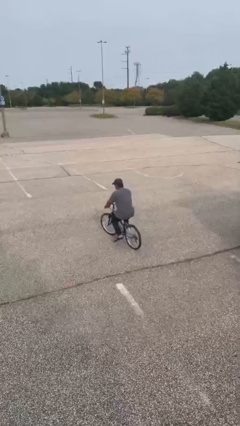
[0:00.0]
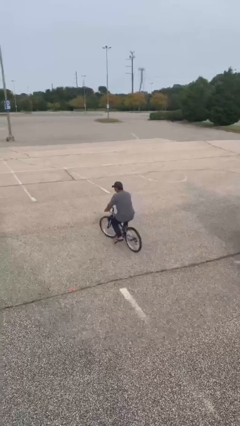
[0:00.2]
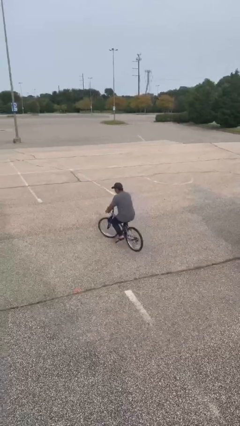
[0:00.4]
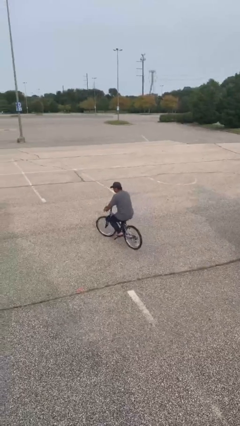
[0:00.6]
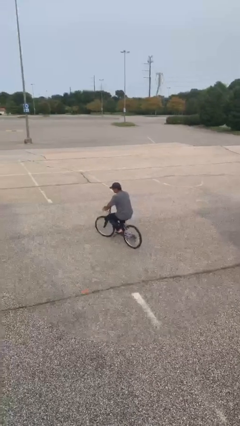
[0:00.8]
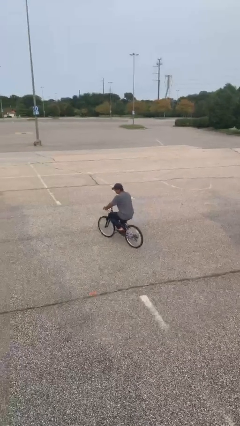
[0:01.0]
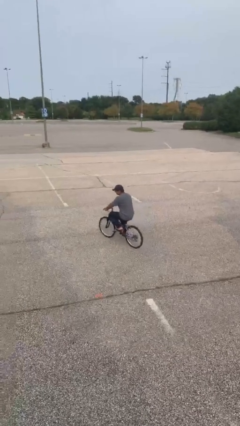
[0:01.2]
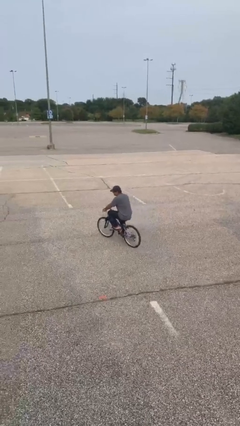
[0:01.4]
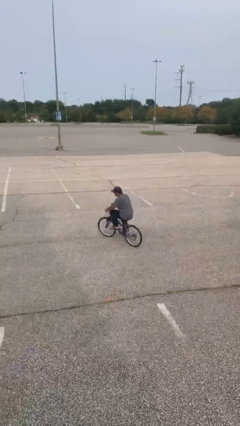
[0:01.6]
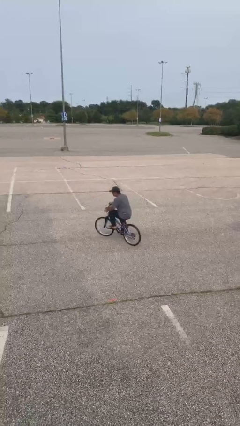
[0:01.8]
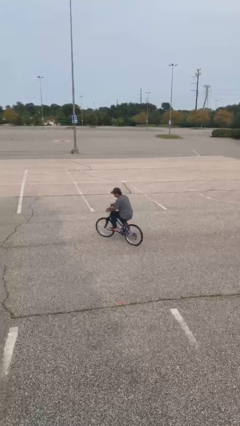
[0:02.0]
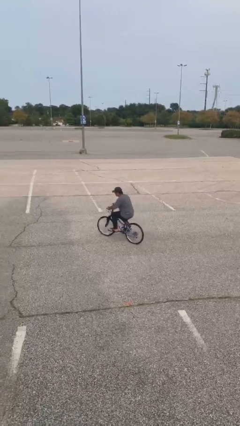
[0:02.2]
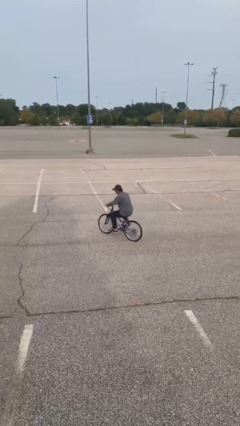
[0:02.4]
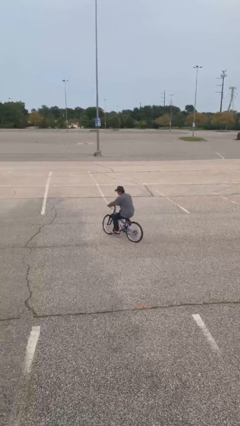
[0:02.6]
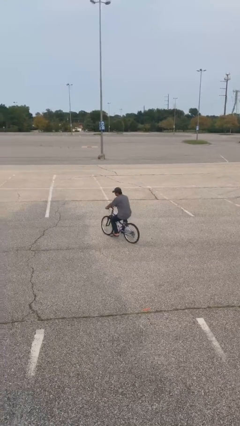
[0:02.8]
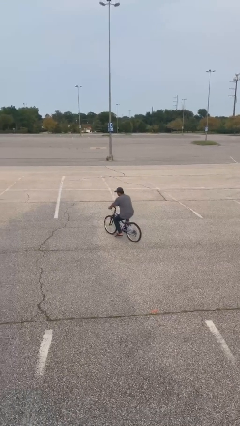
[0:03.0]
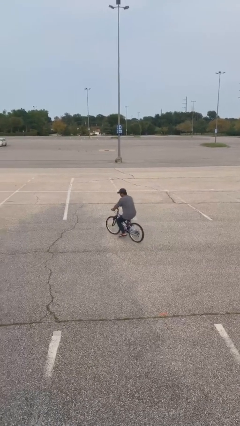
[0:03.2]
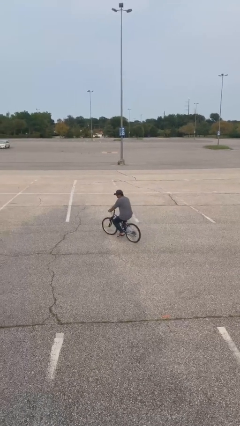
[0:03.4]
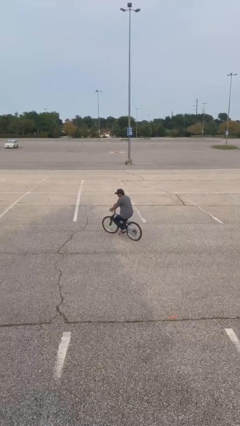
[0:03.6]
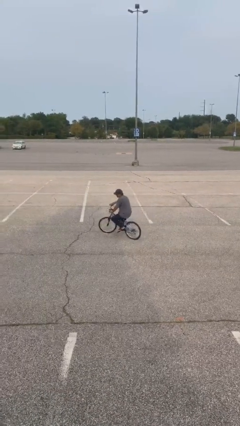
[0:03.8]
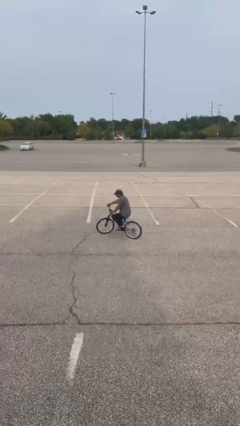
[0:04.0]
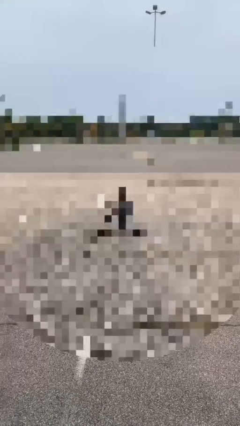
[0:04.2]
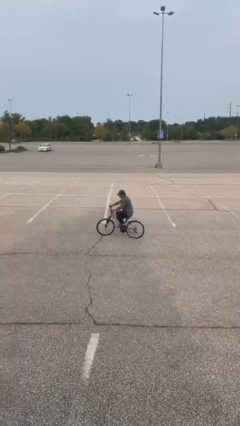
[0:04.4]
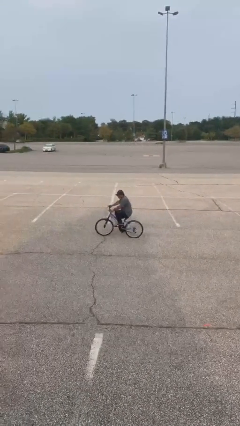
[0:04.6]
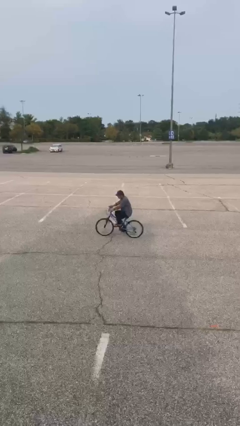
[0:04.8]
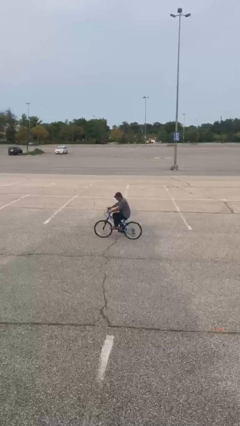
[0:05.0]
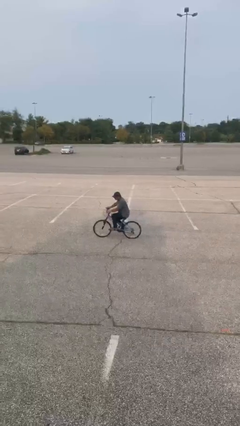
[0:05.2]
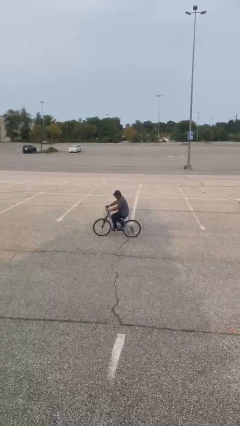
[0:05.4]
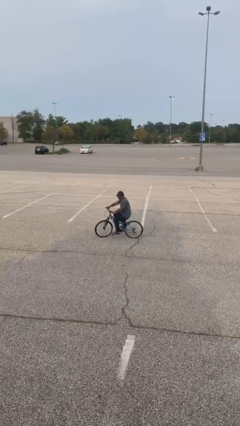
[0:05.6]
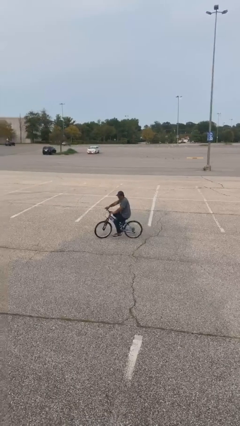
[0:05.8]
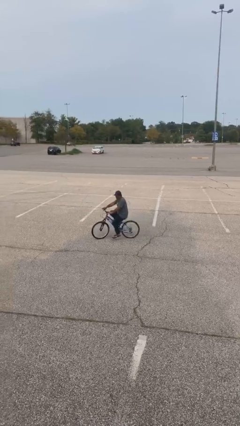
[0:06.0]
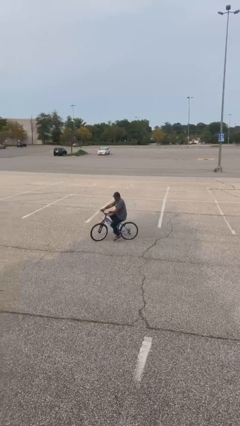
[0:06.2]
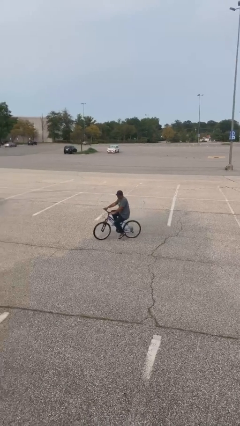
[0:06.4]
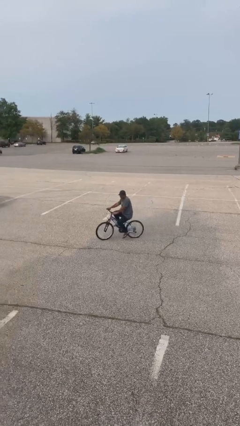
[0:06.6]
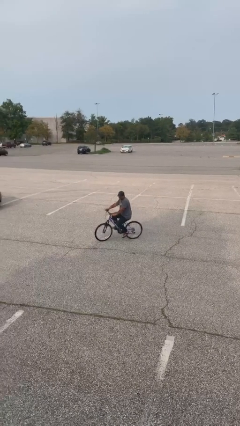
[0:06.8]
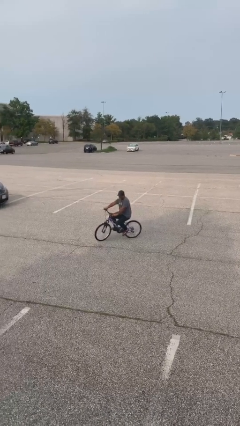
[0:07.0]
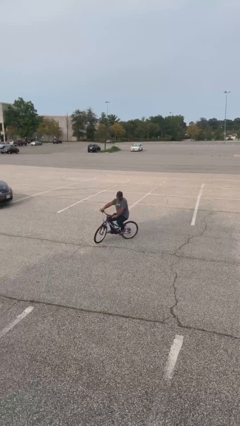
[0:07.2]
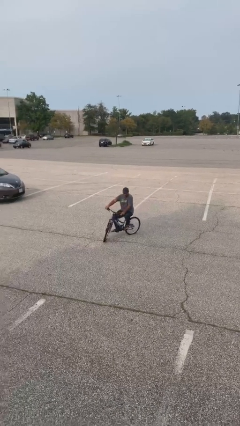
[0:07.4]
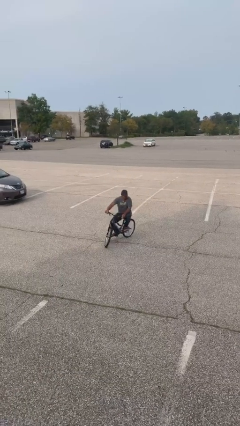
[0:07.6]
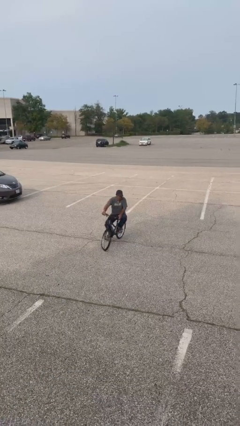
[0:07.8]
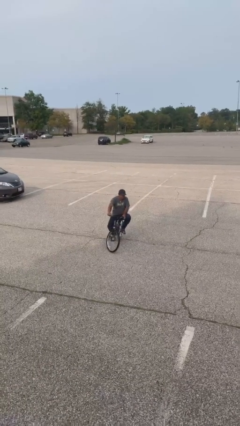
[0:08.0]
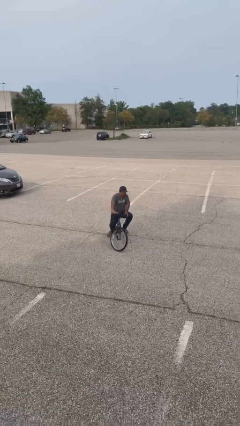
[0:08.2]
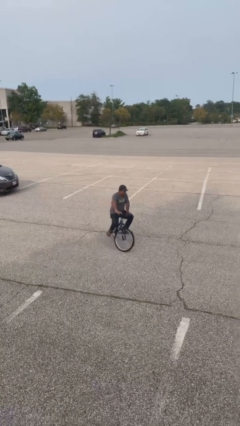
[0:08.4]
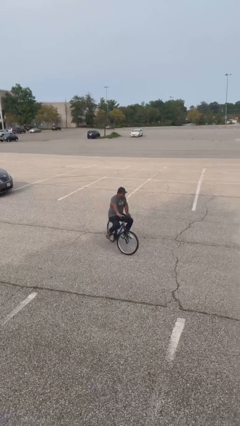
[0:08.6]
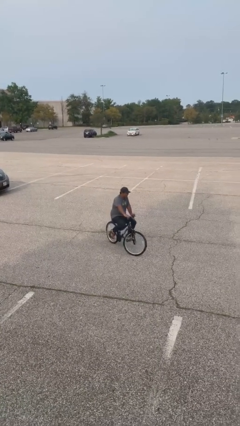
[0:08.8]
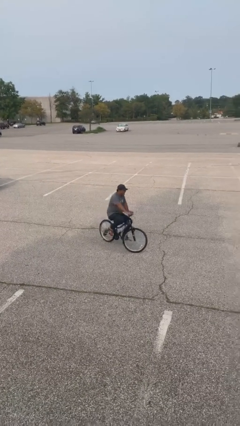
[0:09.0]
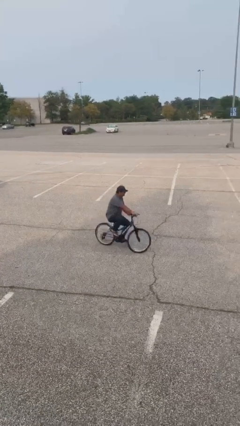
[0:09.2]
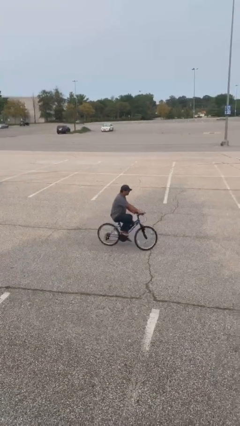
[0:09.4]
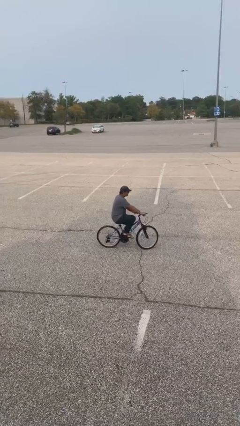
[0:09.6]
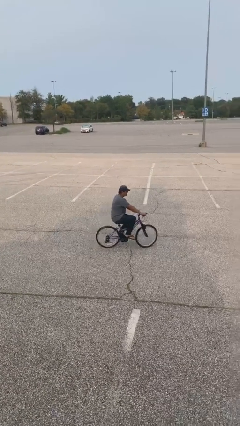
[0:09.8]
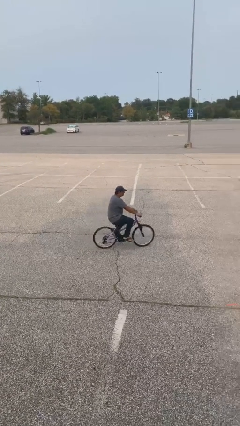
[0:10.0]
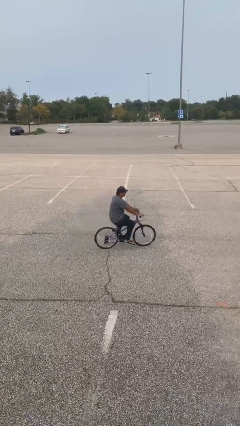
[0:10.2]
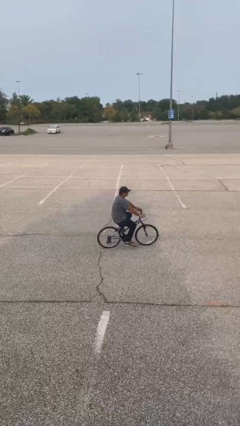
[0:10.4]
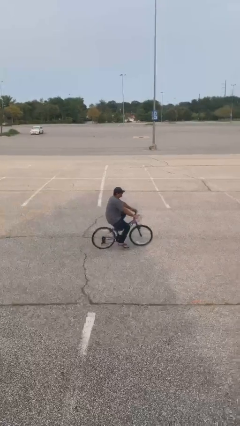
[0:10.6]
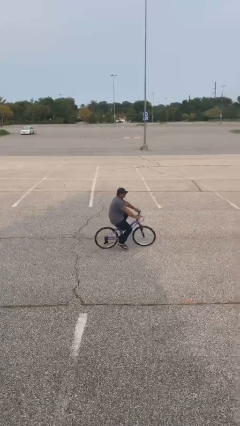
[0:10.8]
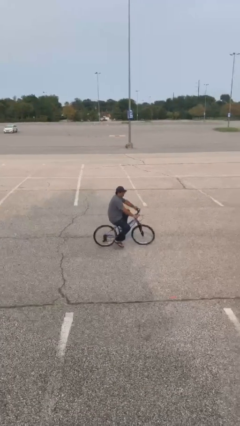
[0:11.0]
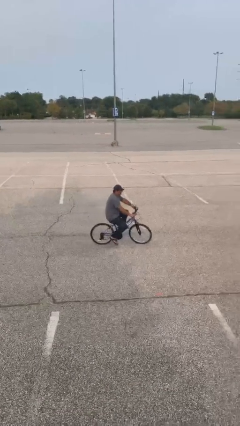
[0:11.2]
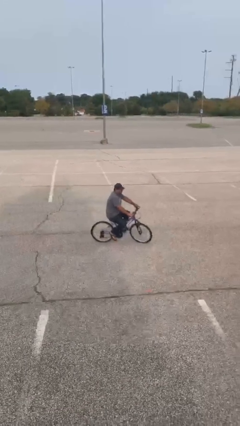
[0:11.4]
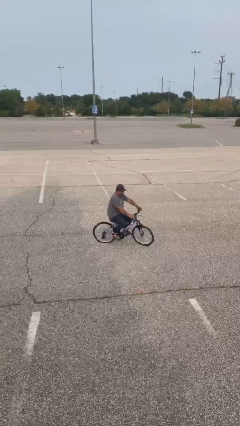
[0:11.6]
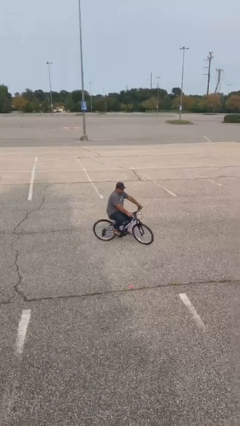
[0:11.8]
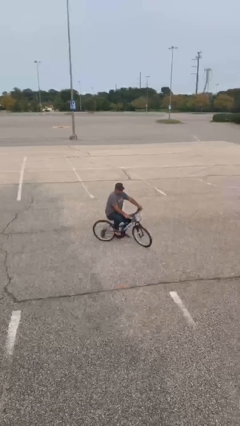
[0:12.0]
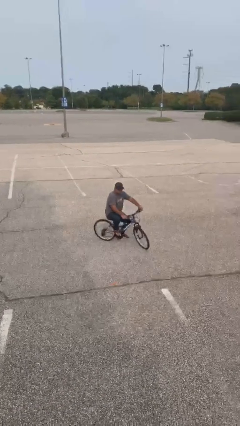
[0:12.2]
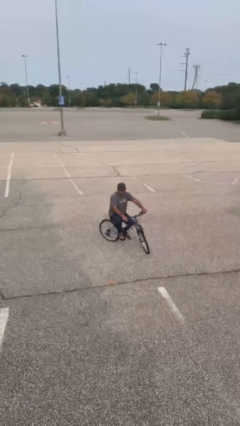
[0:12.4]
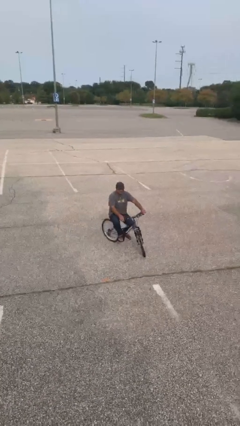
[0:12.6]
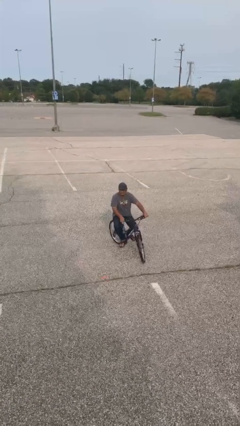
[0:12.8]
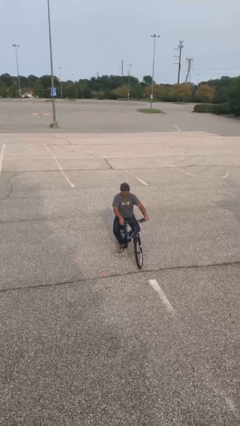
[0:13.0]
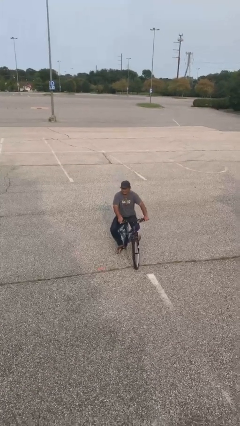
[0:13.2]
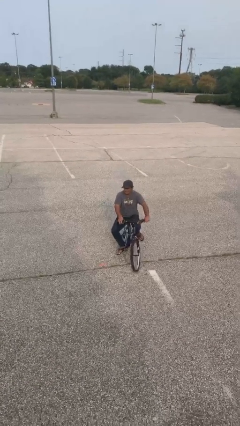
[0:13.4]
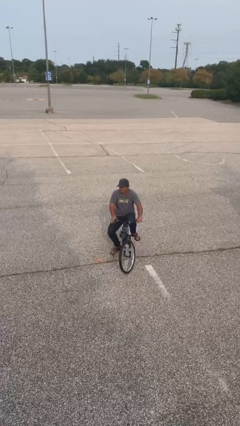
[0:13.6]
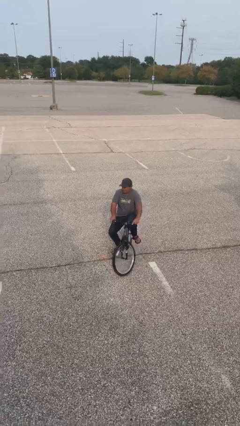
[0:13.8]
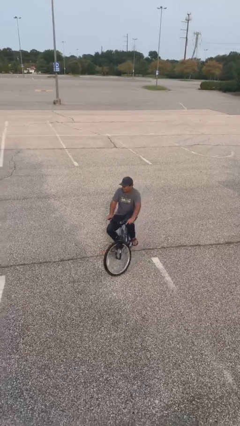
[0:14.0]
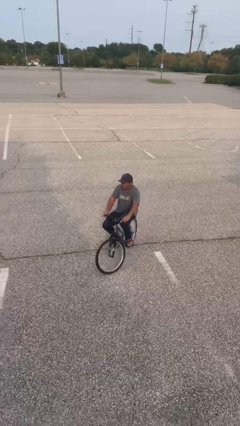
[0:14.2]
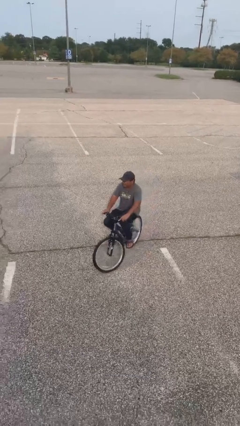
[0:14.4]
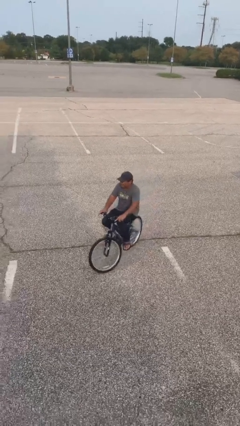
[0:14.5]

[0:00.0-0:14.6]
person rides bicycle

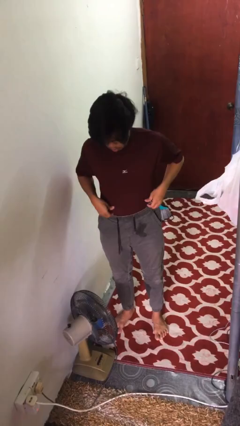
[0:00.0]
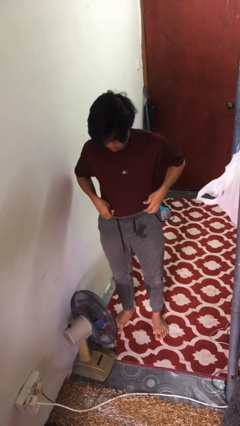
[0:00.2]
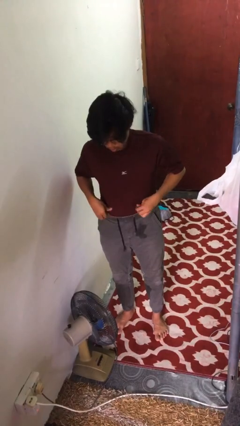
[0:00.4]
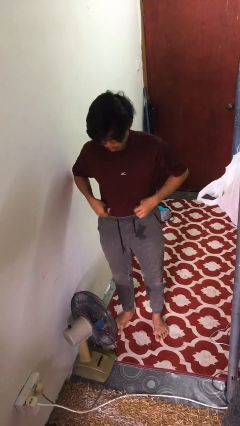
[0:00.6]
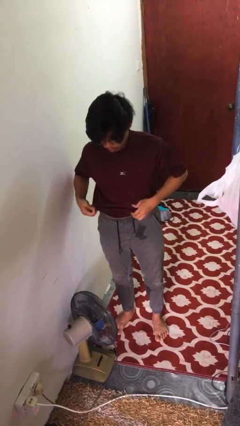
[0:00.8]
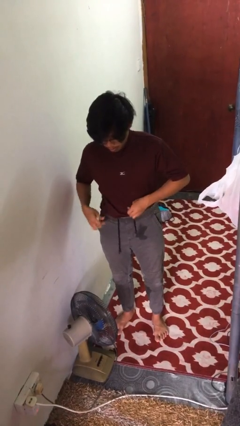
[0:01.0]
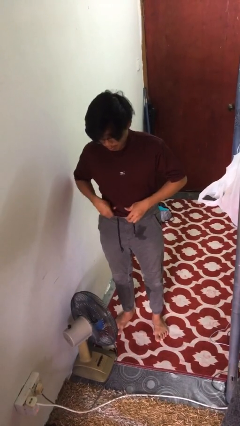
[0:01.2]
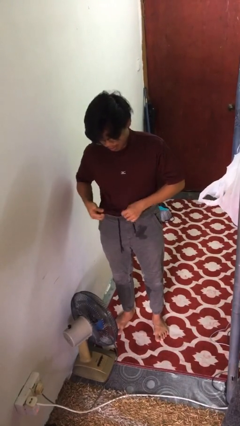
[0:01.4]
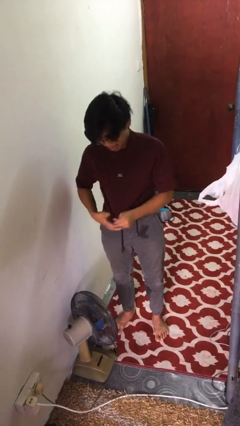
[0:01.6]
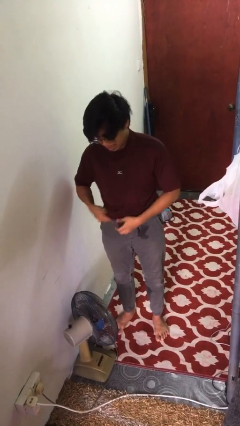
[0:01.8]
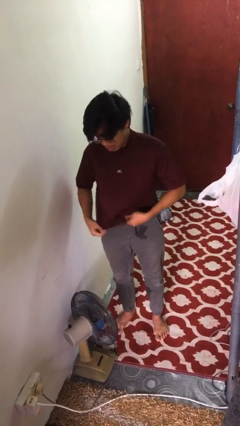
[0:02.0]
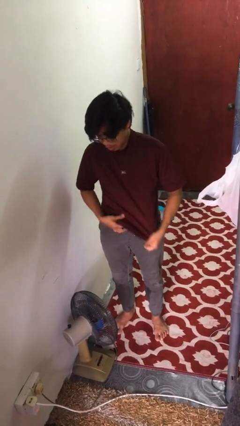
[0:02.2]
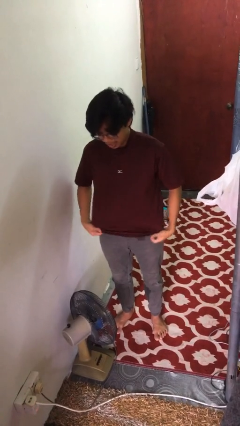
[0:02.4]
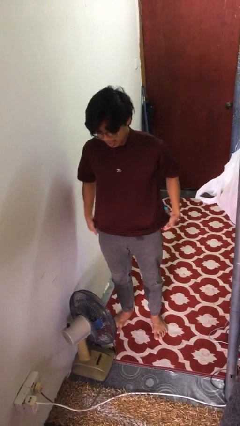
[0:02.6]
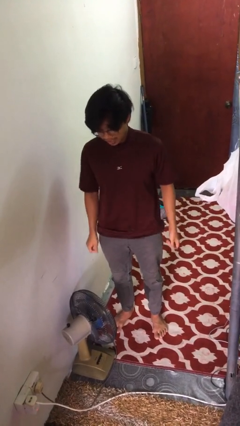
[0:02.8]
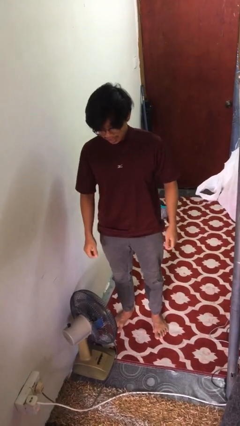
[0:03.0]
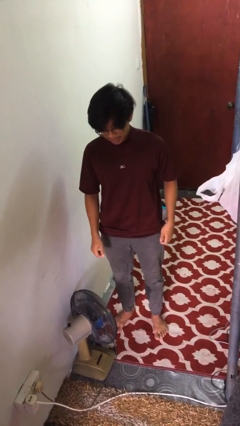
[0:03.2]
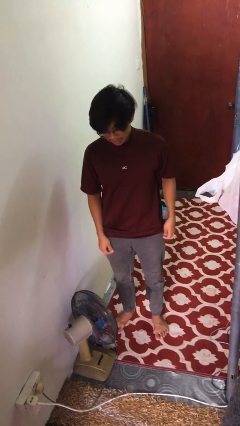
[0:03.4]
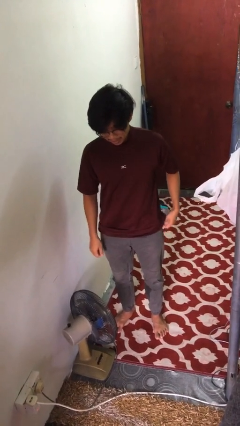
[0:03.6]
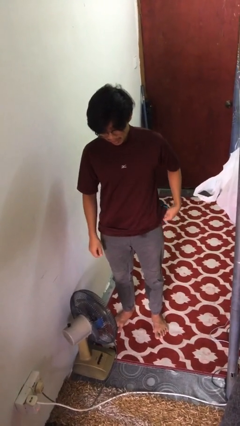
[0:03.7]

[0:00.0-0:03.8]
person untucks shirt
